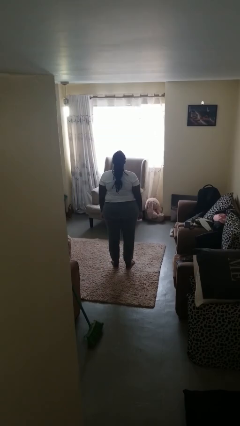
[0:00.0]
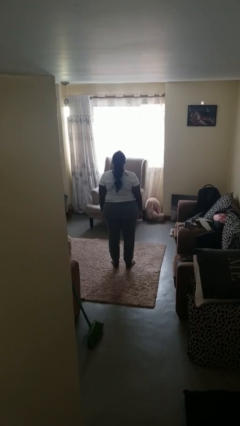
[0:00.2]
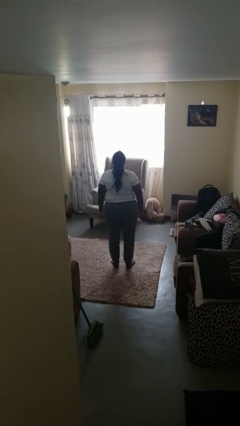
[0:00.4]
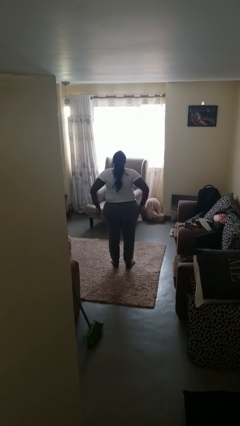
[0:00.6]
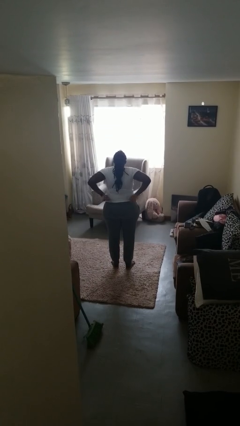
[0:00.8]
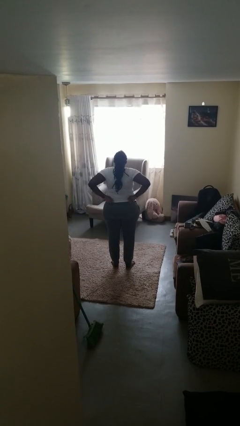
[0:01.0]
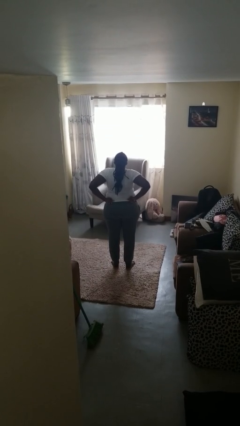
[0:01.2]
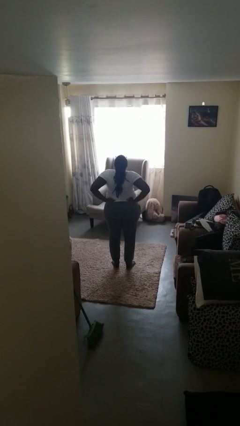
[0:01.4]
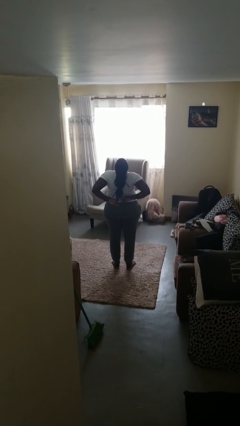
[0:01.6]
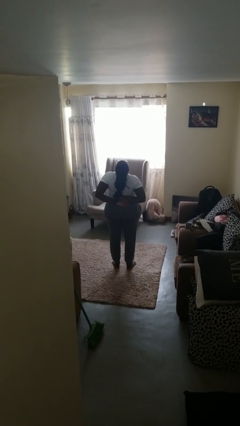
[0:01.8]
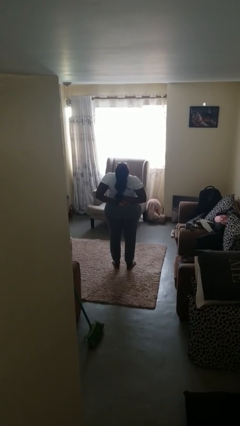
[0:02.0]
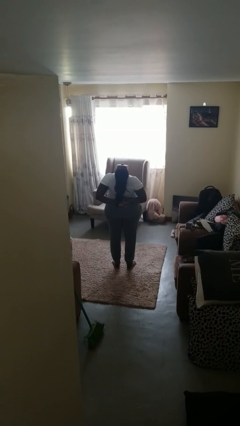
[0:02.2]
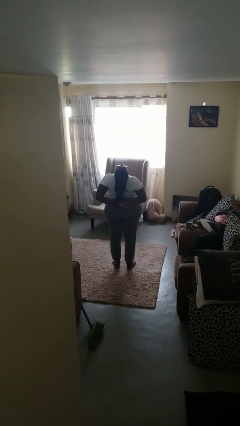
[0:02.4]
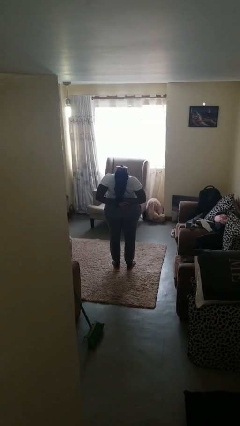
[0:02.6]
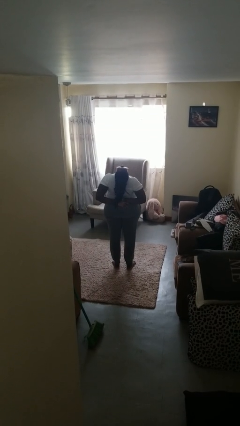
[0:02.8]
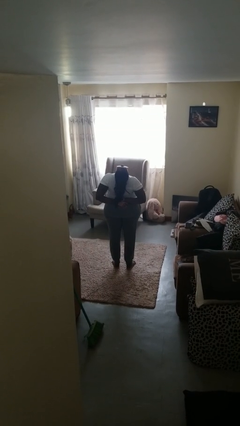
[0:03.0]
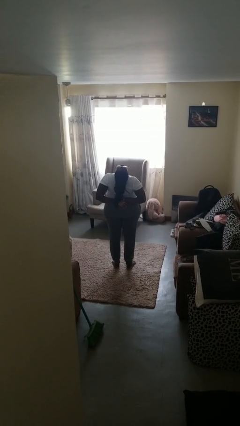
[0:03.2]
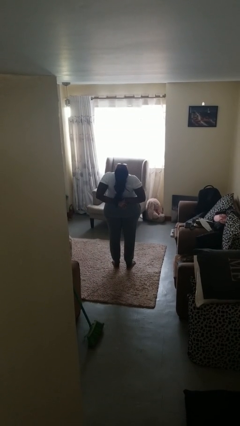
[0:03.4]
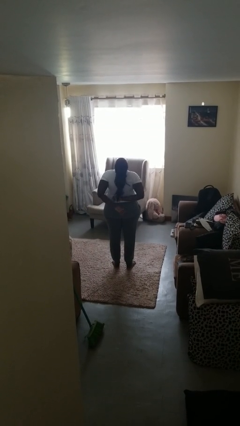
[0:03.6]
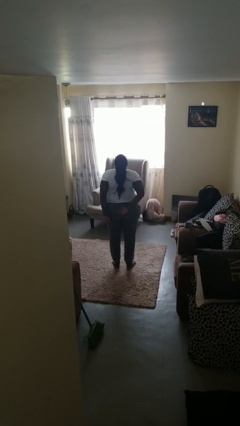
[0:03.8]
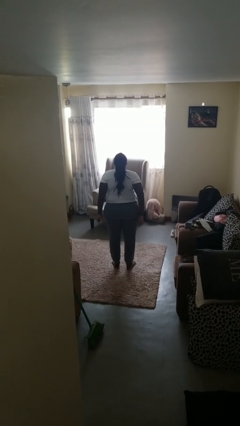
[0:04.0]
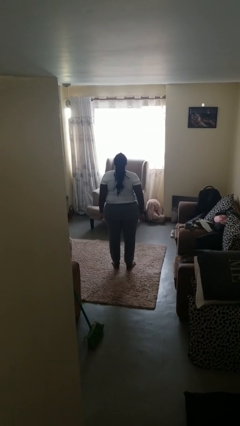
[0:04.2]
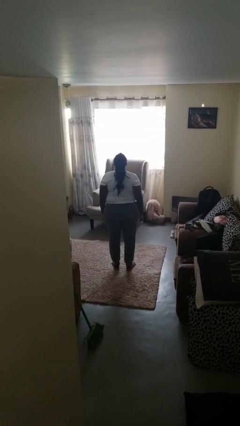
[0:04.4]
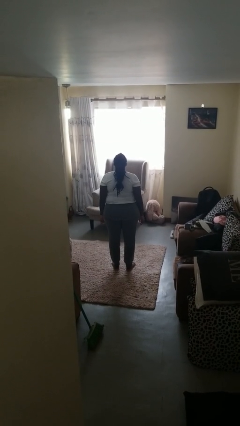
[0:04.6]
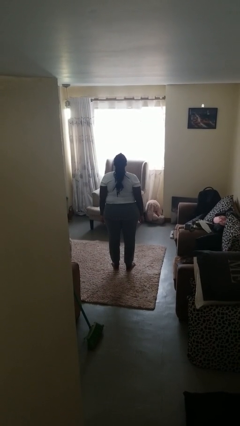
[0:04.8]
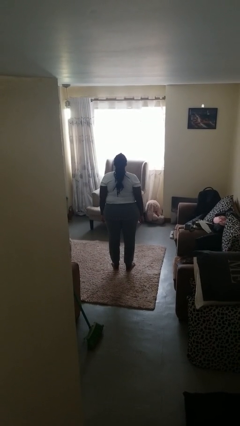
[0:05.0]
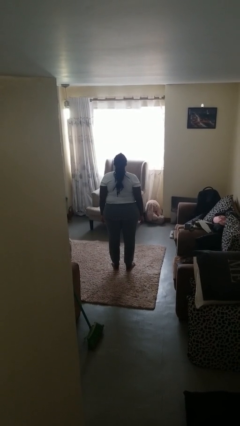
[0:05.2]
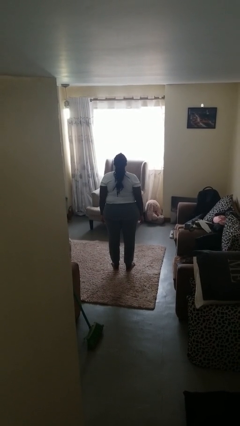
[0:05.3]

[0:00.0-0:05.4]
person stretches back

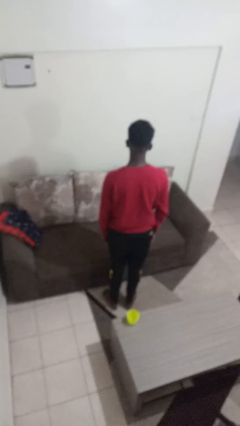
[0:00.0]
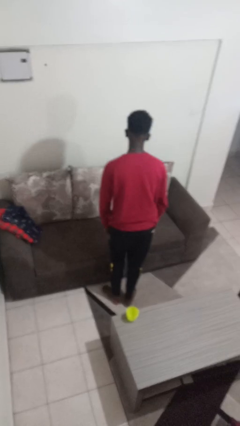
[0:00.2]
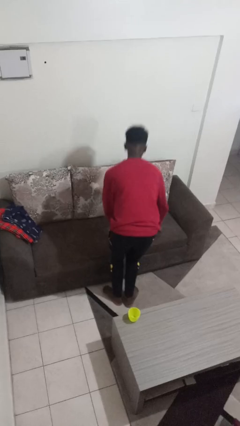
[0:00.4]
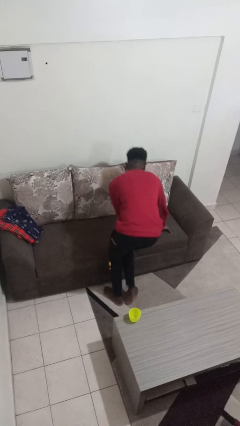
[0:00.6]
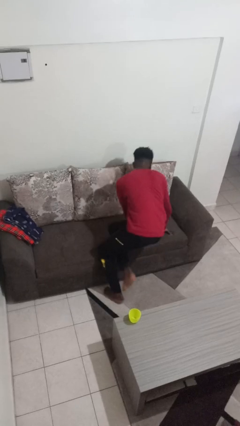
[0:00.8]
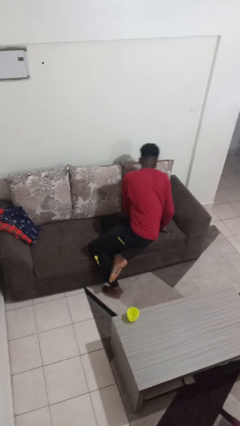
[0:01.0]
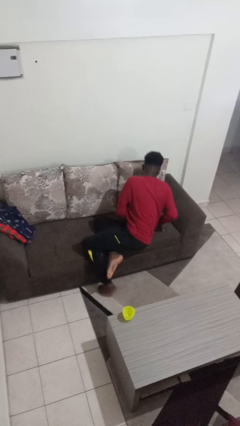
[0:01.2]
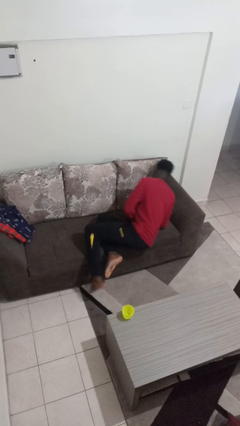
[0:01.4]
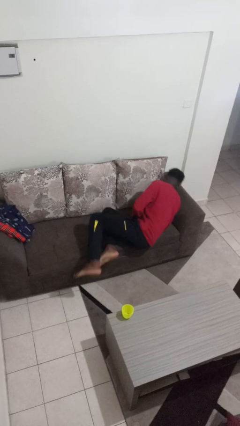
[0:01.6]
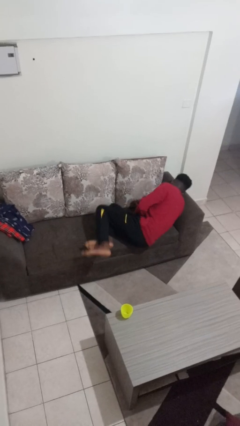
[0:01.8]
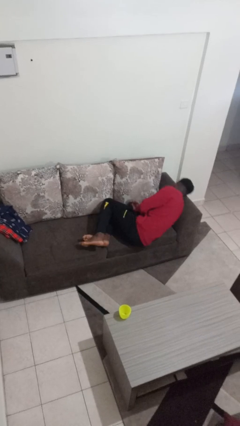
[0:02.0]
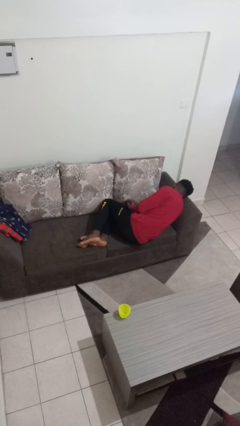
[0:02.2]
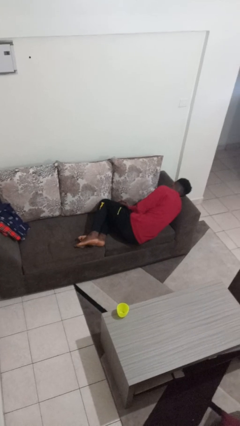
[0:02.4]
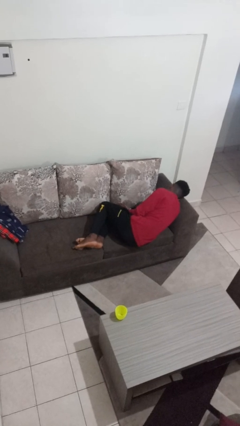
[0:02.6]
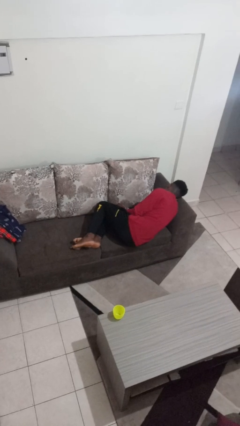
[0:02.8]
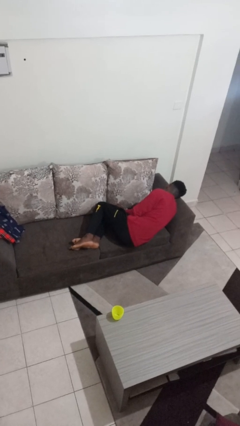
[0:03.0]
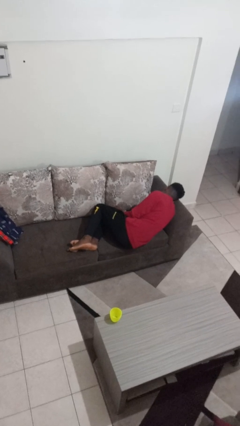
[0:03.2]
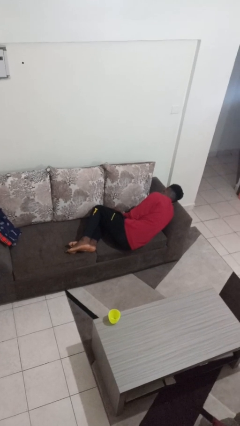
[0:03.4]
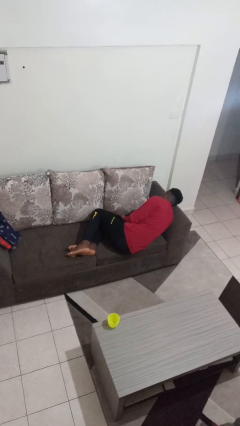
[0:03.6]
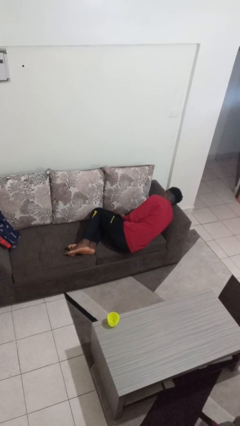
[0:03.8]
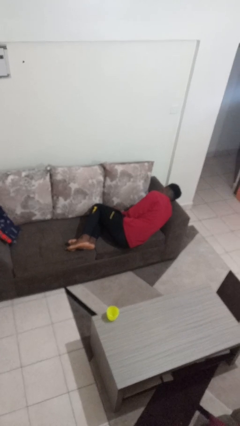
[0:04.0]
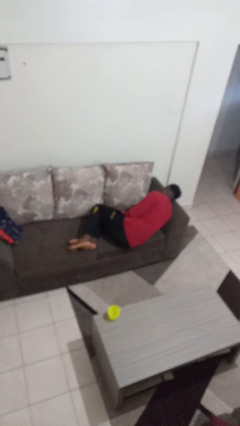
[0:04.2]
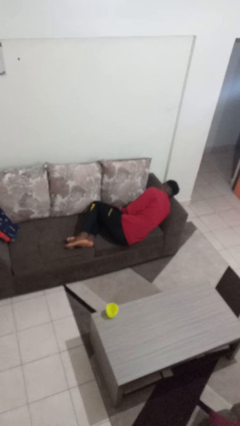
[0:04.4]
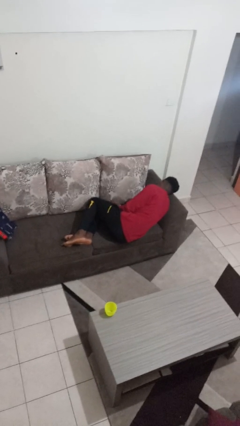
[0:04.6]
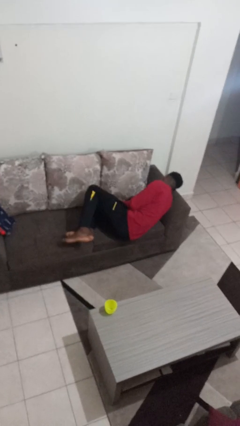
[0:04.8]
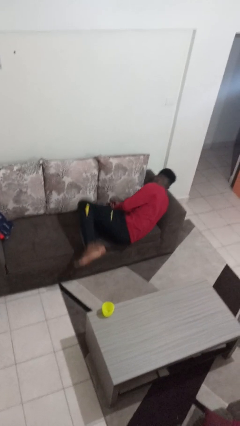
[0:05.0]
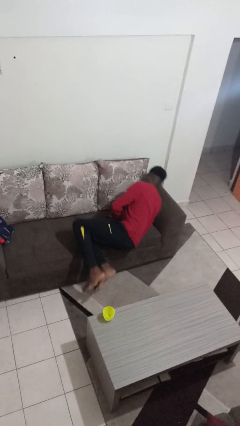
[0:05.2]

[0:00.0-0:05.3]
person lies down on couch

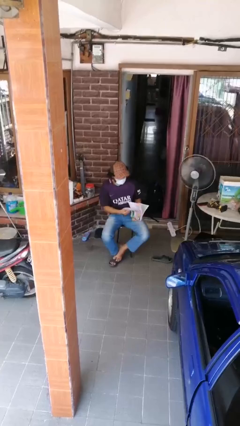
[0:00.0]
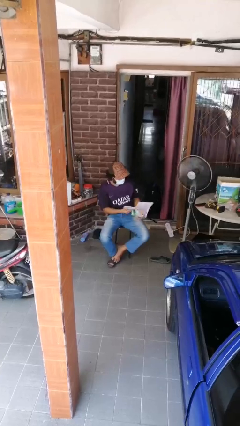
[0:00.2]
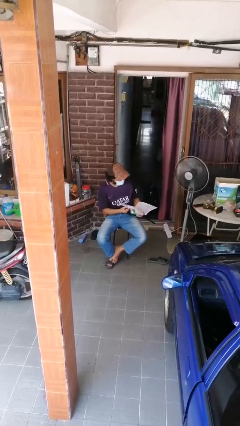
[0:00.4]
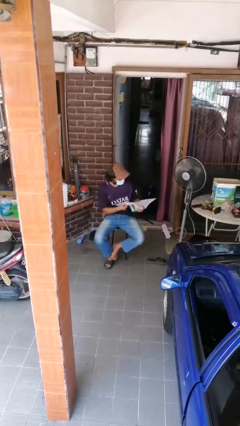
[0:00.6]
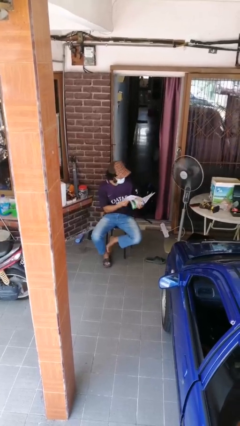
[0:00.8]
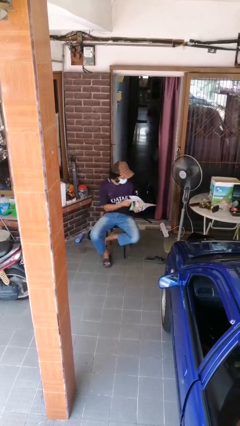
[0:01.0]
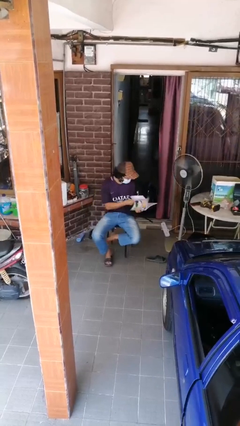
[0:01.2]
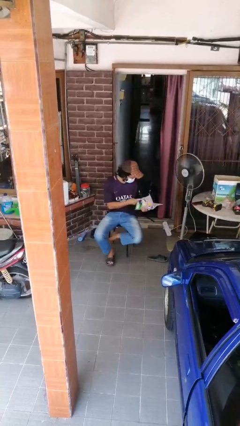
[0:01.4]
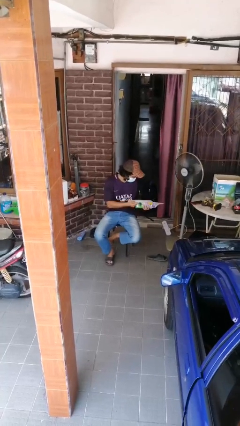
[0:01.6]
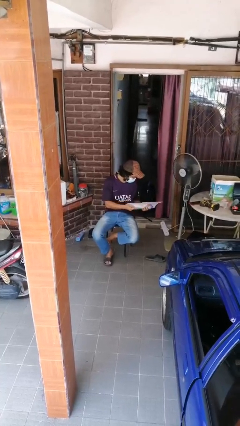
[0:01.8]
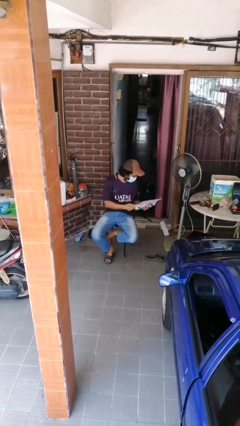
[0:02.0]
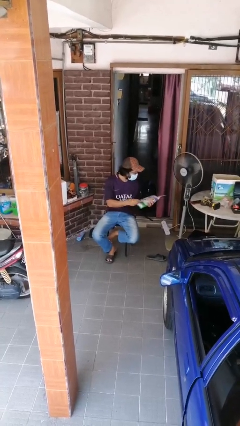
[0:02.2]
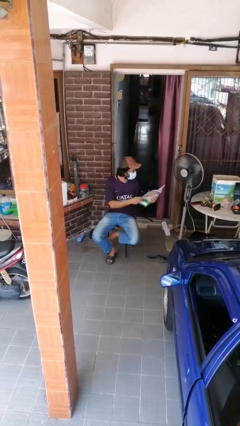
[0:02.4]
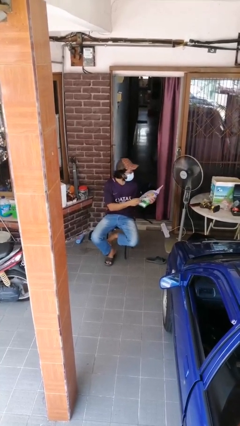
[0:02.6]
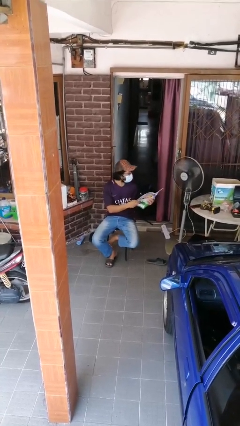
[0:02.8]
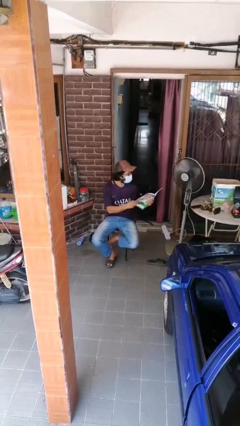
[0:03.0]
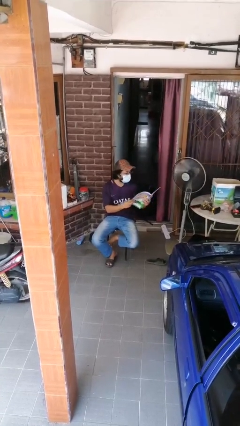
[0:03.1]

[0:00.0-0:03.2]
person reads document

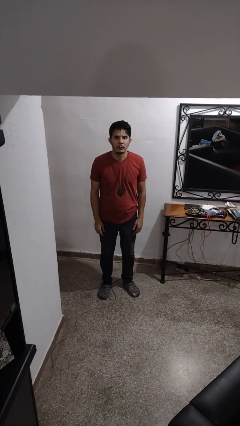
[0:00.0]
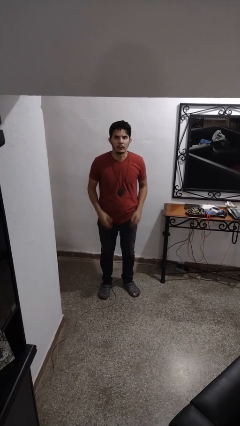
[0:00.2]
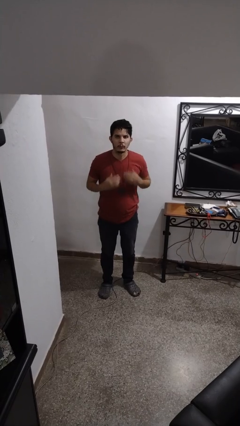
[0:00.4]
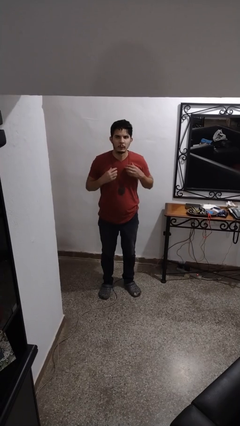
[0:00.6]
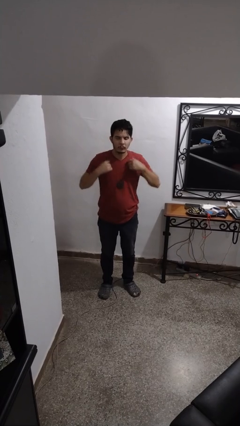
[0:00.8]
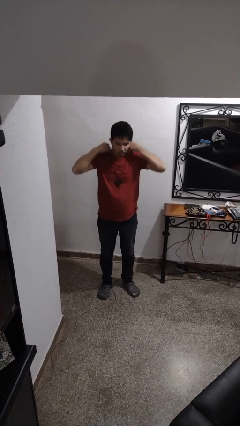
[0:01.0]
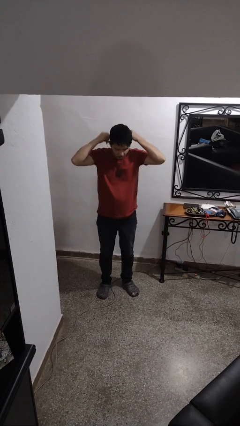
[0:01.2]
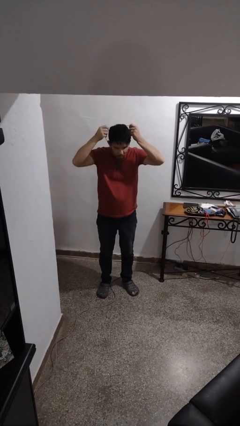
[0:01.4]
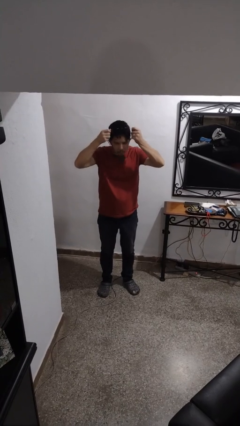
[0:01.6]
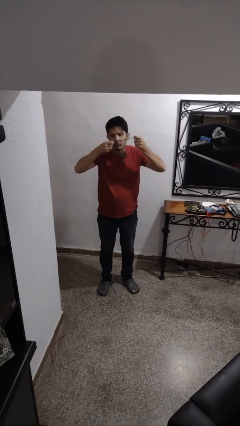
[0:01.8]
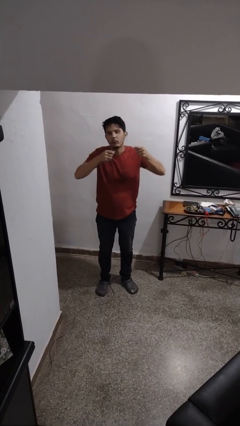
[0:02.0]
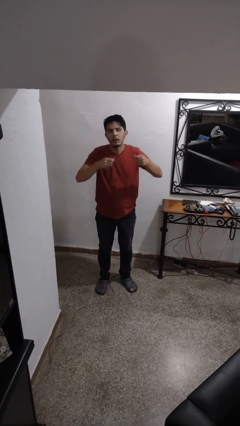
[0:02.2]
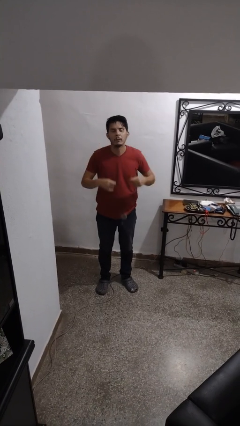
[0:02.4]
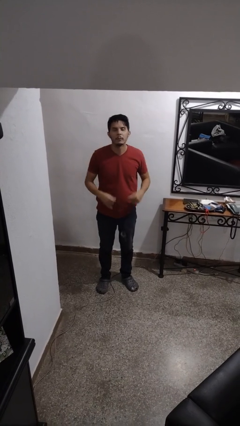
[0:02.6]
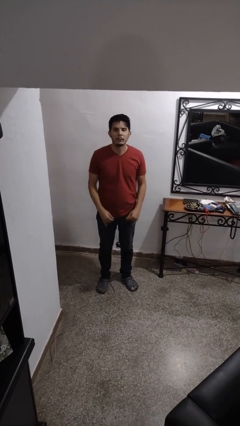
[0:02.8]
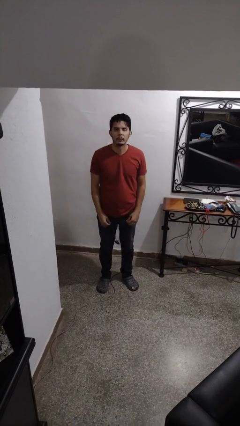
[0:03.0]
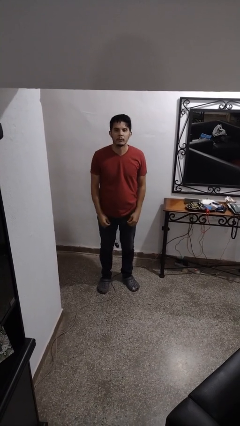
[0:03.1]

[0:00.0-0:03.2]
person takes off necklace

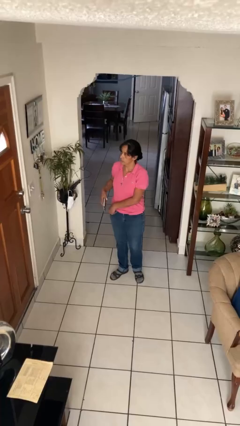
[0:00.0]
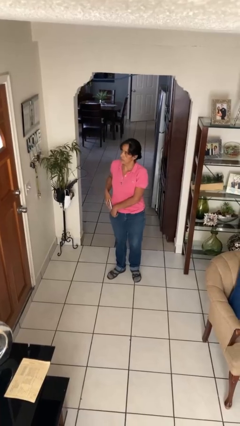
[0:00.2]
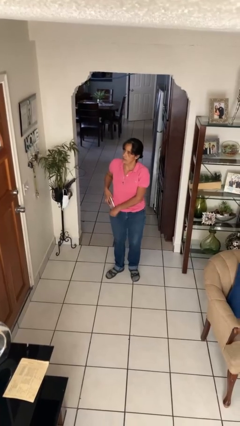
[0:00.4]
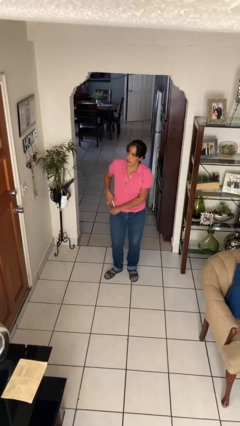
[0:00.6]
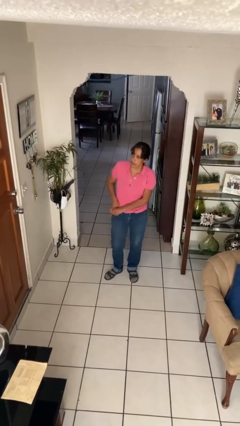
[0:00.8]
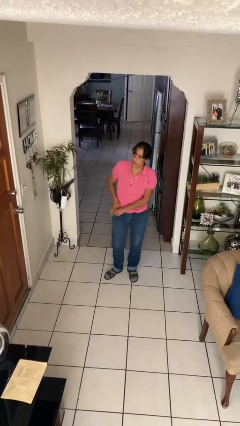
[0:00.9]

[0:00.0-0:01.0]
person puts phone into pocket
